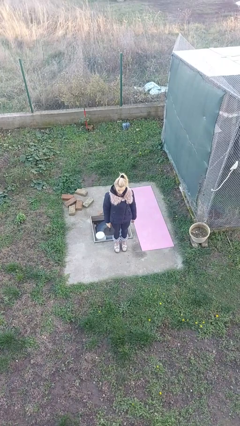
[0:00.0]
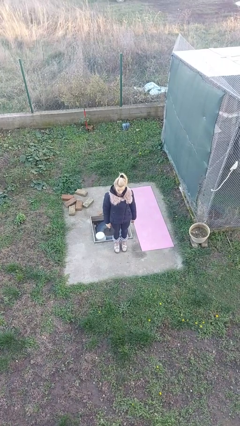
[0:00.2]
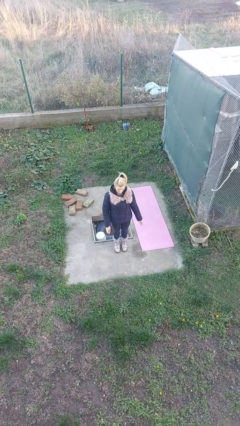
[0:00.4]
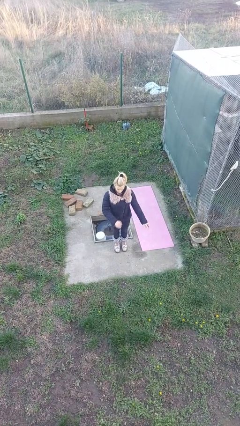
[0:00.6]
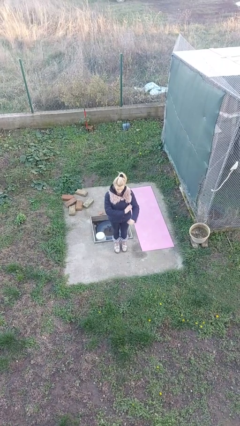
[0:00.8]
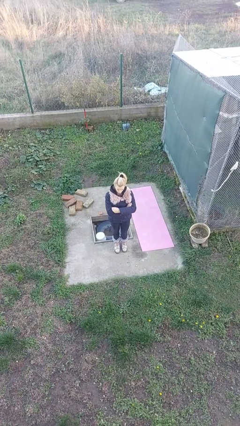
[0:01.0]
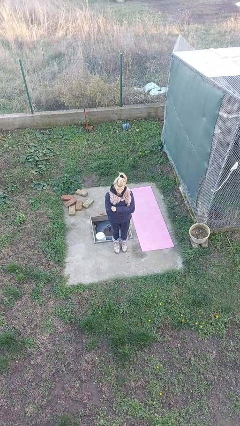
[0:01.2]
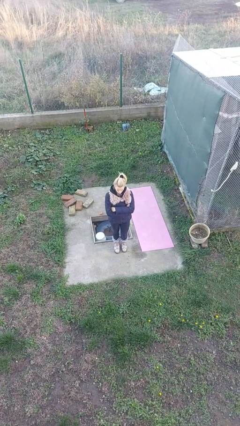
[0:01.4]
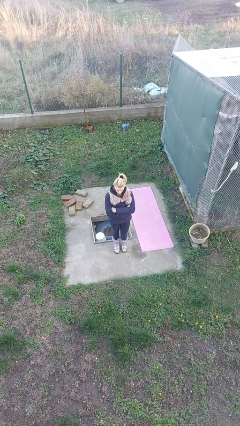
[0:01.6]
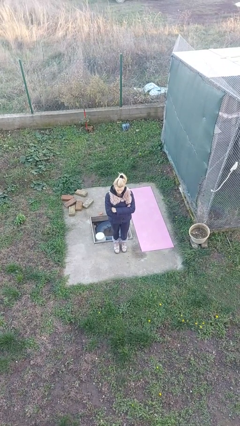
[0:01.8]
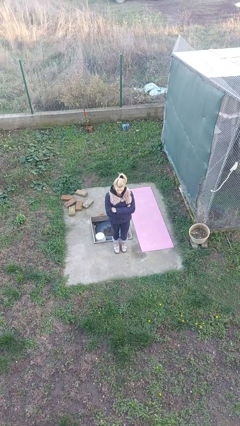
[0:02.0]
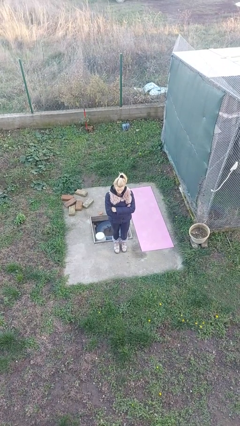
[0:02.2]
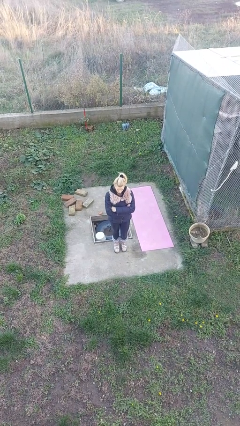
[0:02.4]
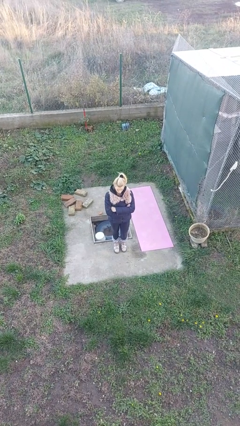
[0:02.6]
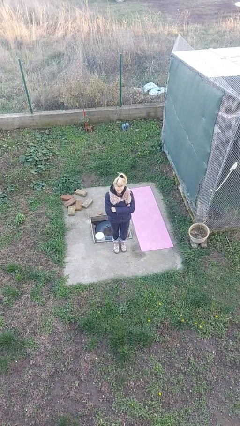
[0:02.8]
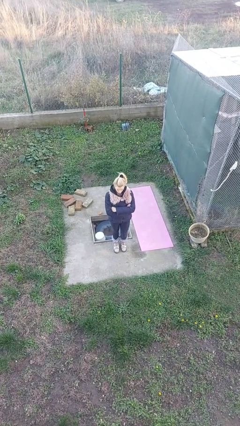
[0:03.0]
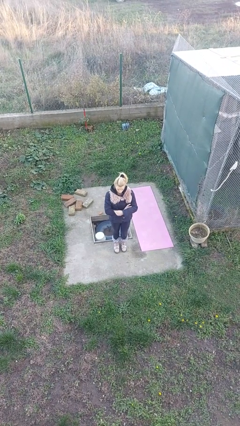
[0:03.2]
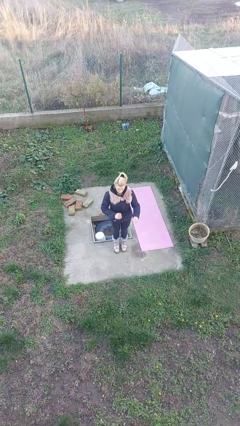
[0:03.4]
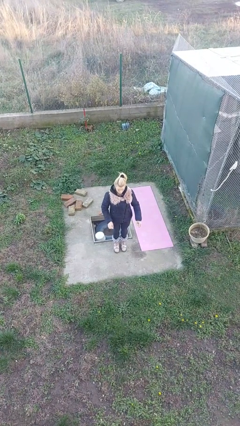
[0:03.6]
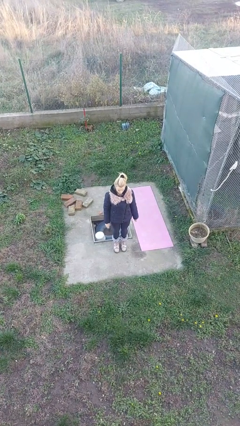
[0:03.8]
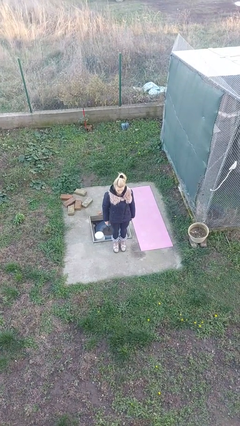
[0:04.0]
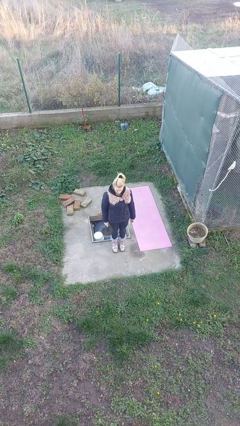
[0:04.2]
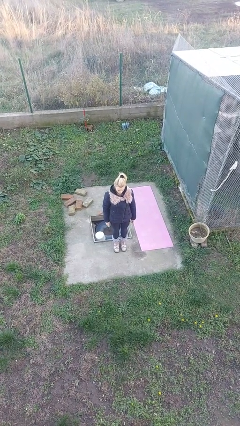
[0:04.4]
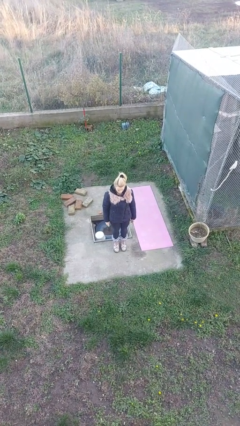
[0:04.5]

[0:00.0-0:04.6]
person crosses arms

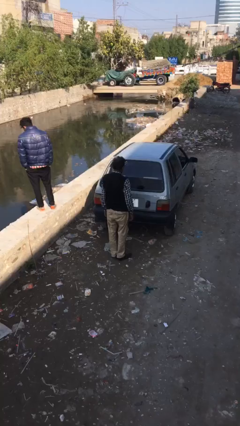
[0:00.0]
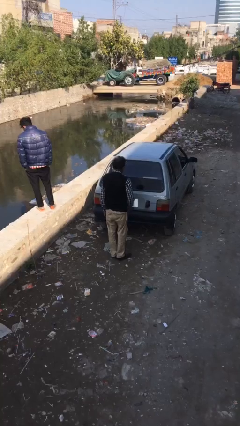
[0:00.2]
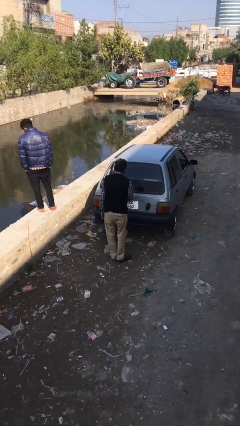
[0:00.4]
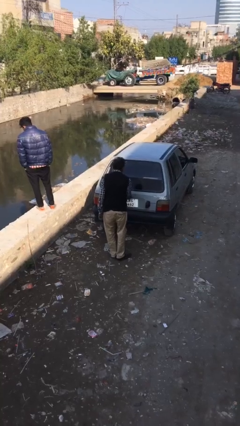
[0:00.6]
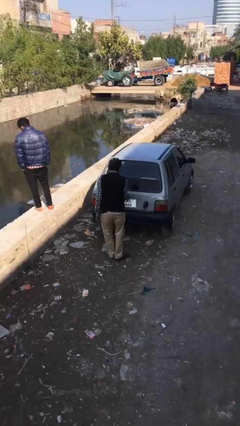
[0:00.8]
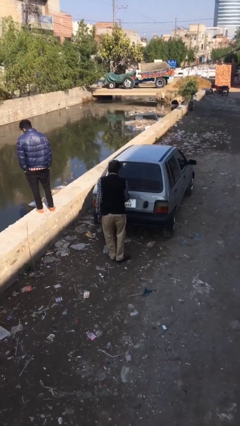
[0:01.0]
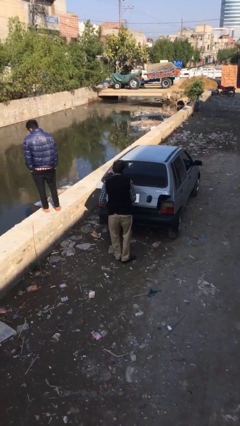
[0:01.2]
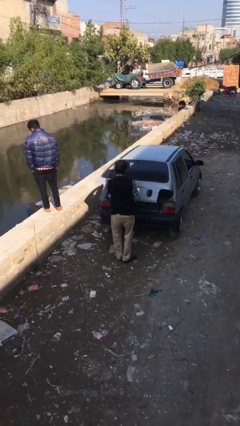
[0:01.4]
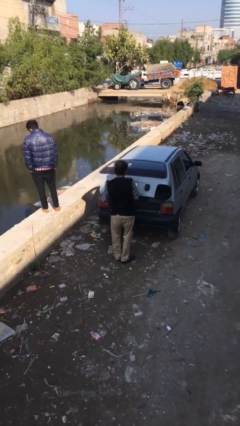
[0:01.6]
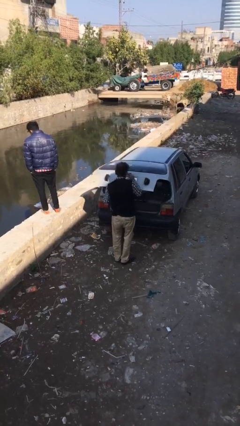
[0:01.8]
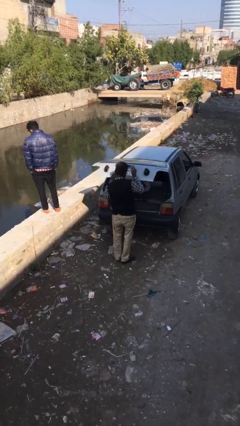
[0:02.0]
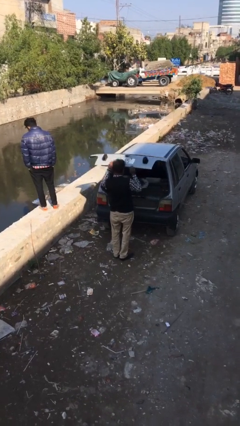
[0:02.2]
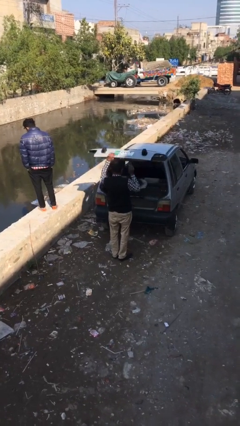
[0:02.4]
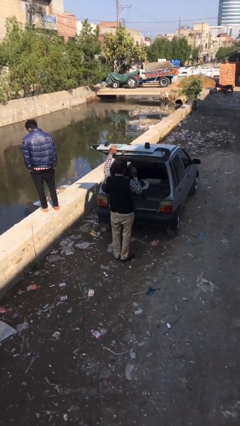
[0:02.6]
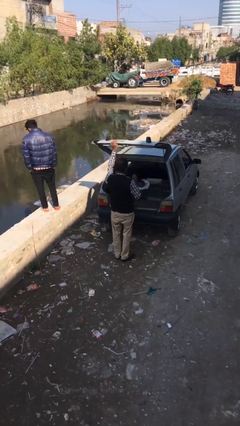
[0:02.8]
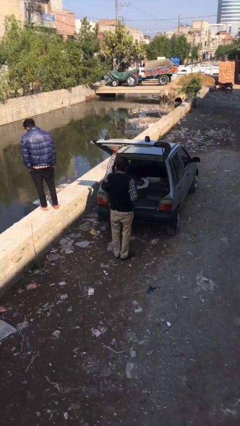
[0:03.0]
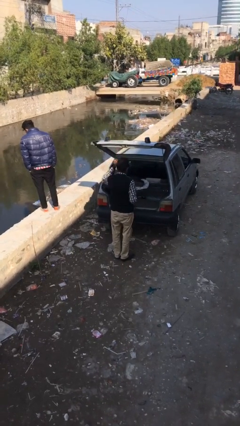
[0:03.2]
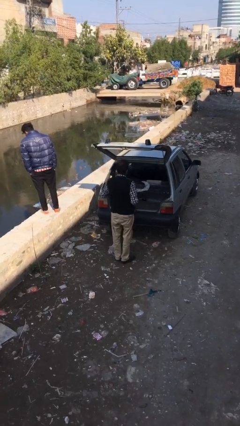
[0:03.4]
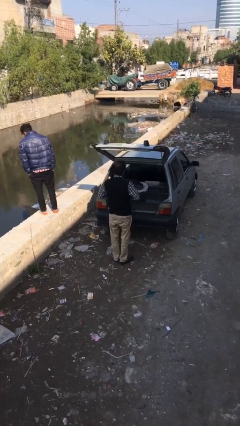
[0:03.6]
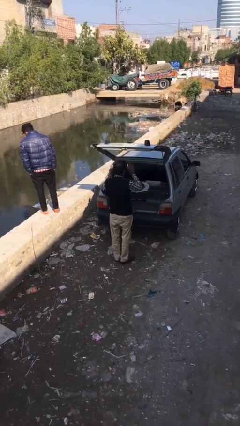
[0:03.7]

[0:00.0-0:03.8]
person opens car trunk

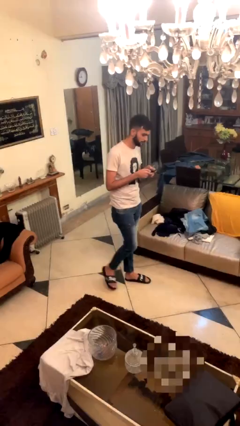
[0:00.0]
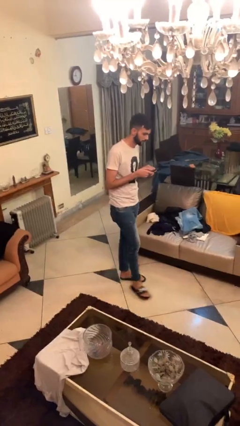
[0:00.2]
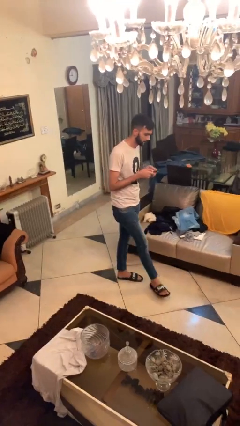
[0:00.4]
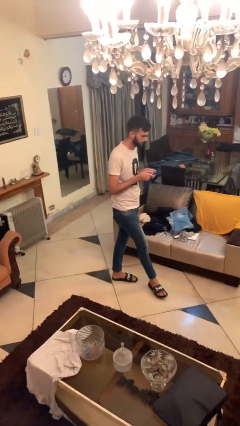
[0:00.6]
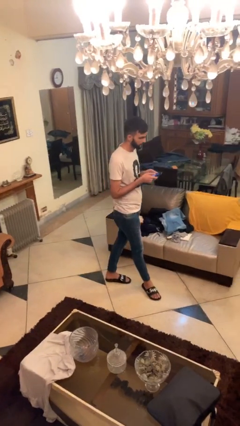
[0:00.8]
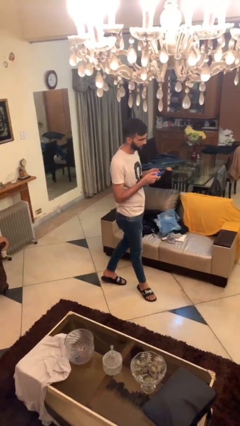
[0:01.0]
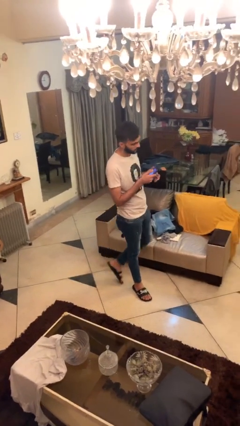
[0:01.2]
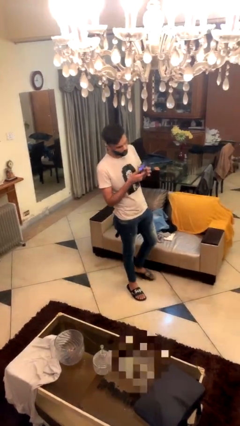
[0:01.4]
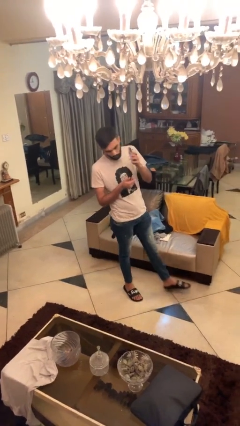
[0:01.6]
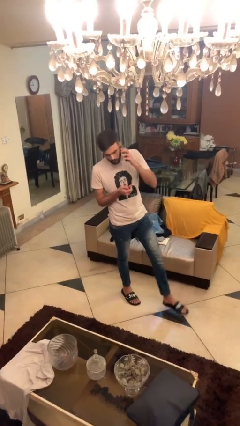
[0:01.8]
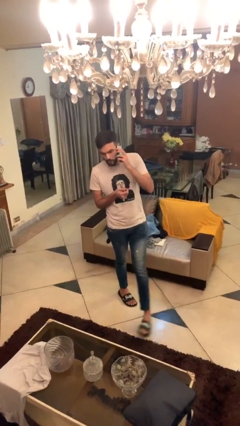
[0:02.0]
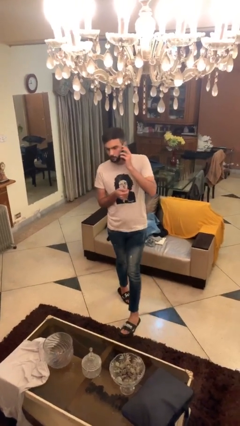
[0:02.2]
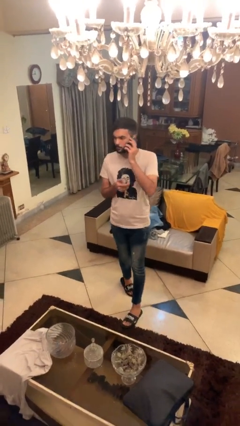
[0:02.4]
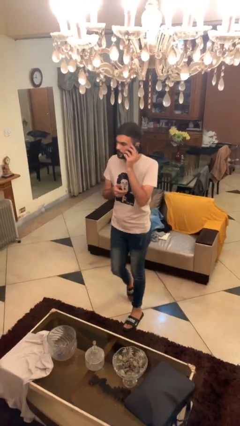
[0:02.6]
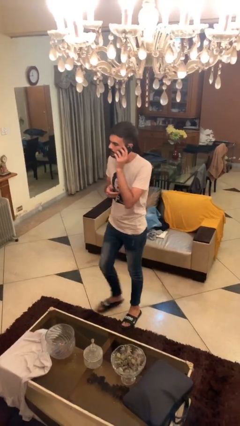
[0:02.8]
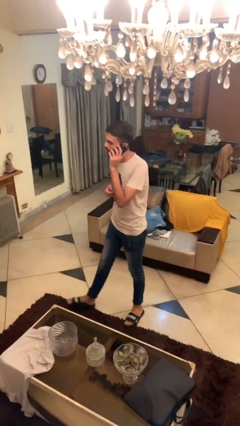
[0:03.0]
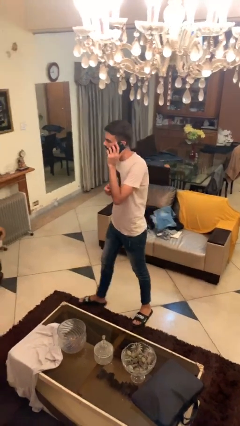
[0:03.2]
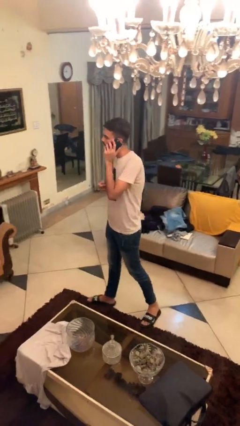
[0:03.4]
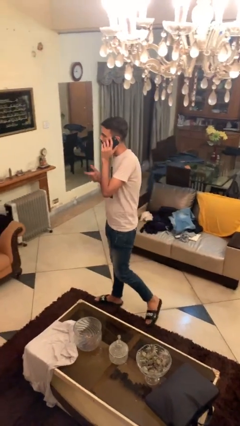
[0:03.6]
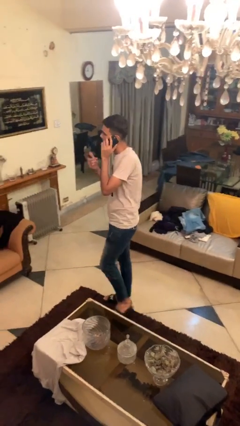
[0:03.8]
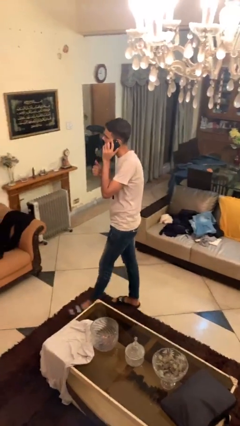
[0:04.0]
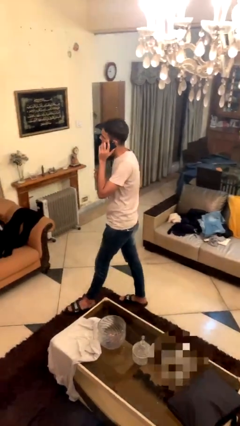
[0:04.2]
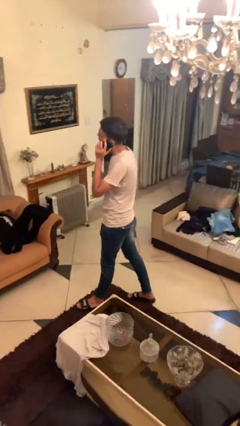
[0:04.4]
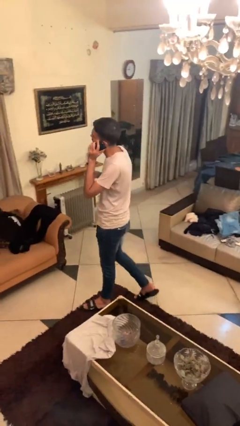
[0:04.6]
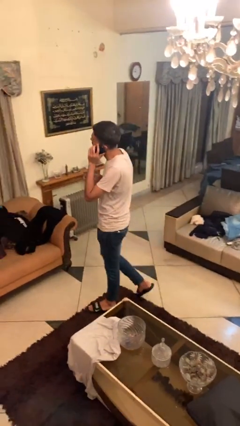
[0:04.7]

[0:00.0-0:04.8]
person talks on phone

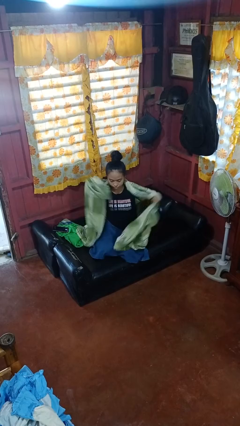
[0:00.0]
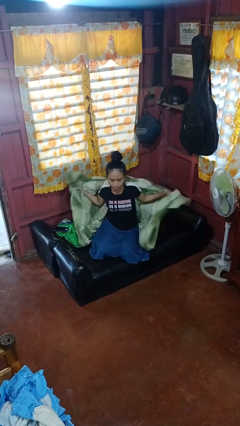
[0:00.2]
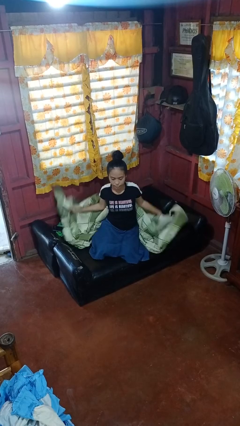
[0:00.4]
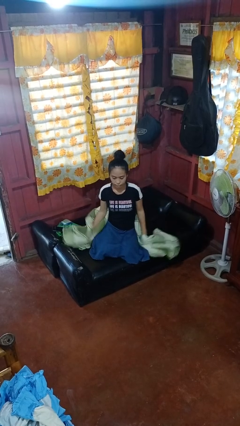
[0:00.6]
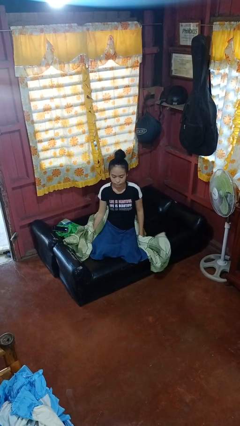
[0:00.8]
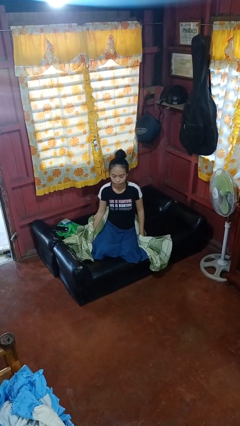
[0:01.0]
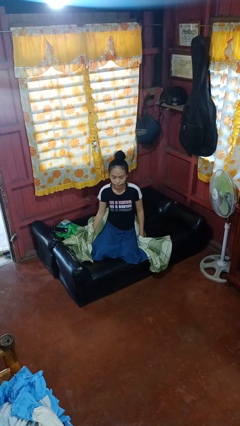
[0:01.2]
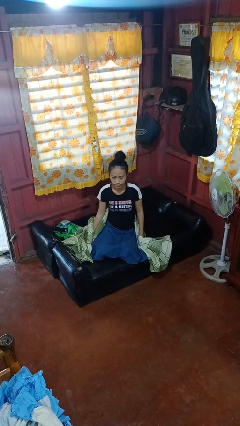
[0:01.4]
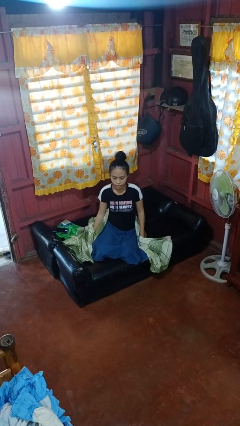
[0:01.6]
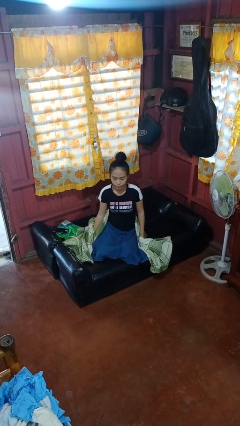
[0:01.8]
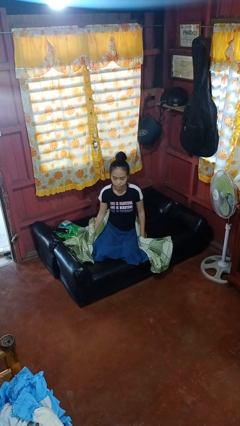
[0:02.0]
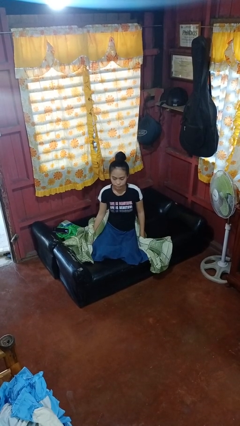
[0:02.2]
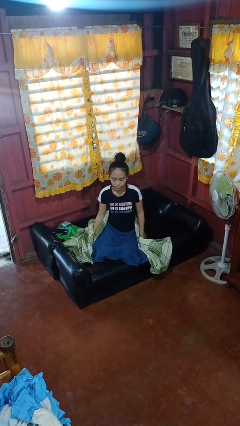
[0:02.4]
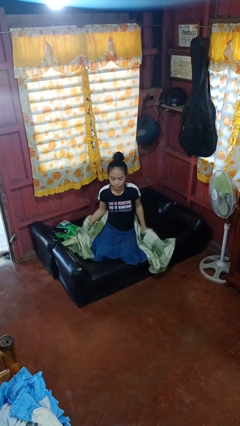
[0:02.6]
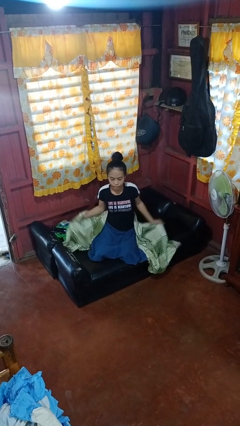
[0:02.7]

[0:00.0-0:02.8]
person uncovers with blanket

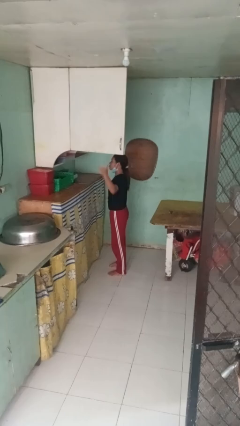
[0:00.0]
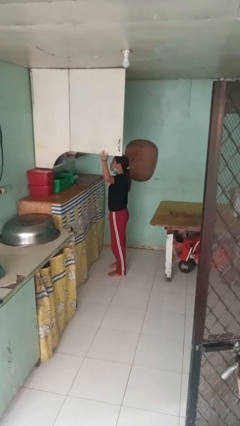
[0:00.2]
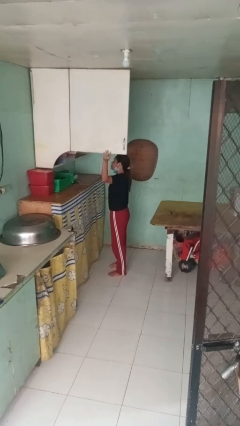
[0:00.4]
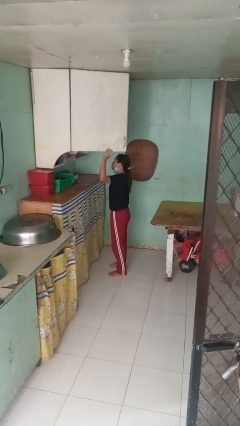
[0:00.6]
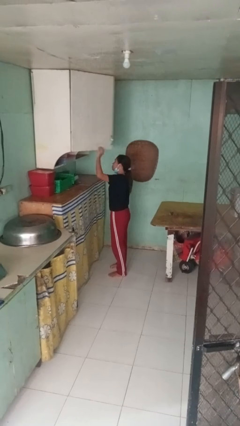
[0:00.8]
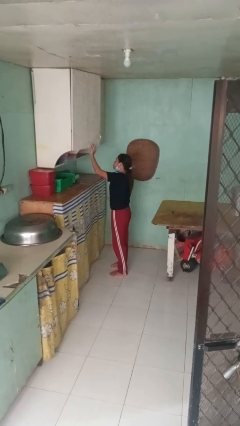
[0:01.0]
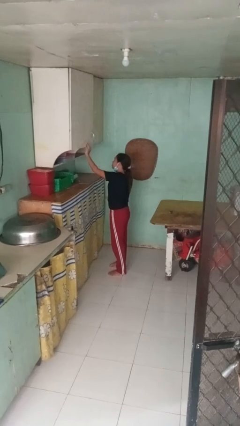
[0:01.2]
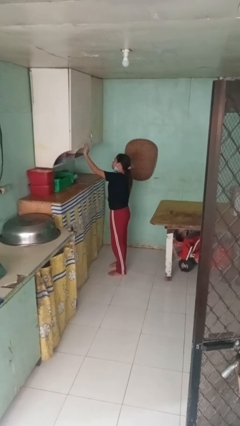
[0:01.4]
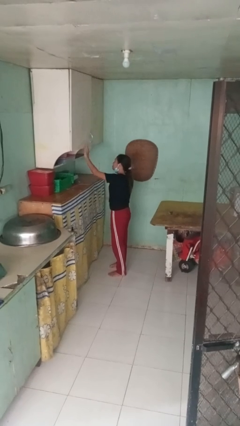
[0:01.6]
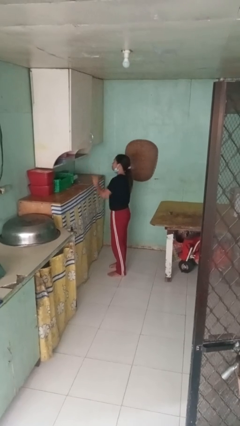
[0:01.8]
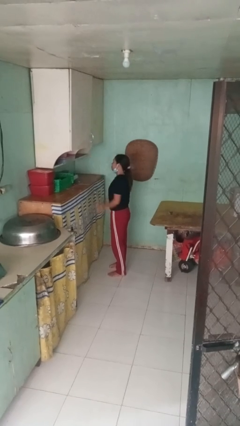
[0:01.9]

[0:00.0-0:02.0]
person closes cabinet
